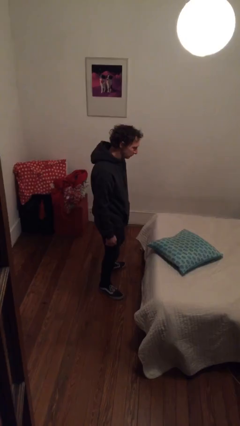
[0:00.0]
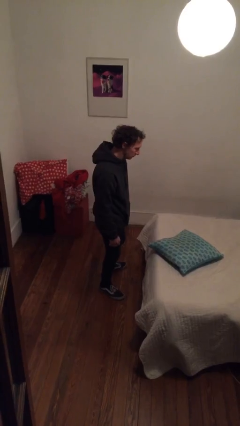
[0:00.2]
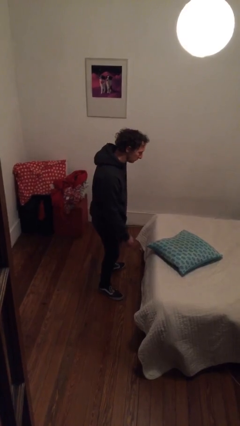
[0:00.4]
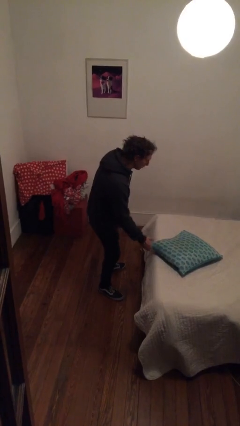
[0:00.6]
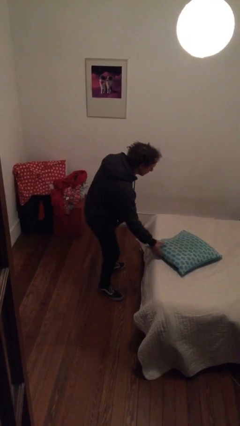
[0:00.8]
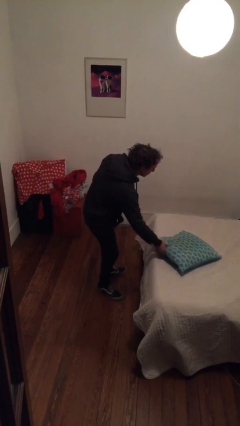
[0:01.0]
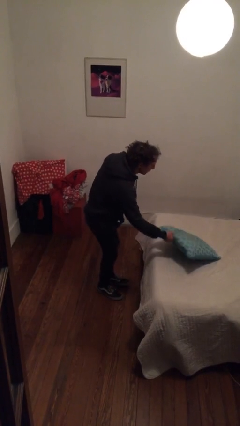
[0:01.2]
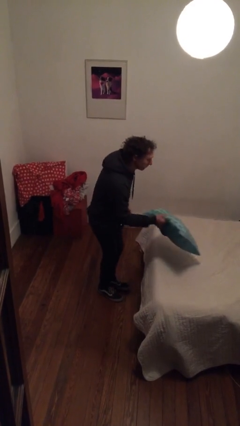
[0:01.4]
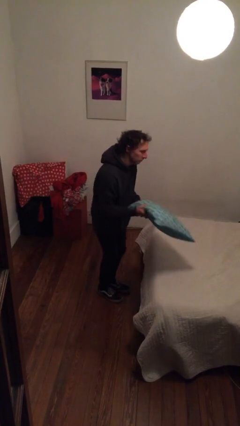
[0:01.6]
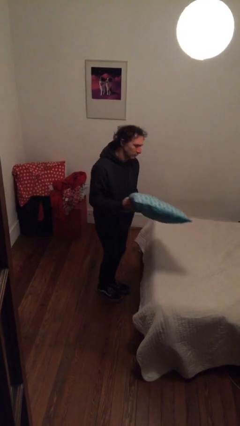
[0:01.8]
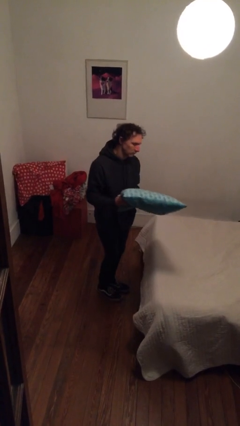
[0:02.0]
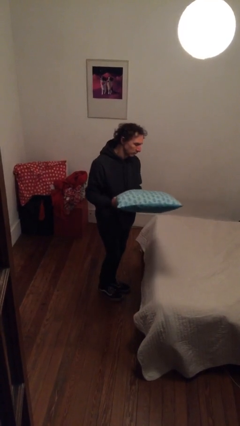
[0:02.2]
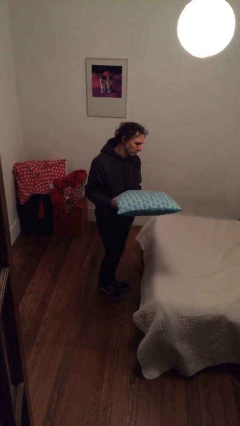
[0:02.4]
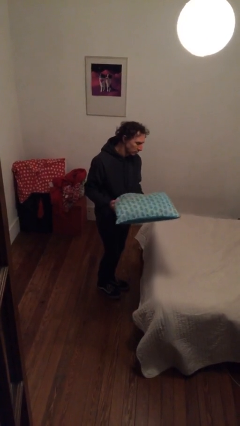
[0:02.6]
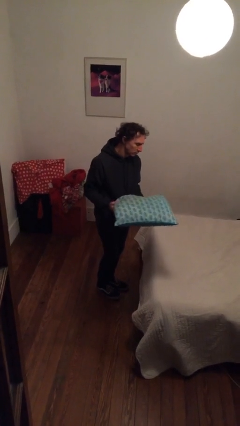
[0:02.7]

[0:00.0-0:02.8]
person picks up object from bed

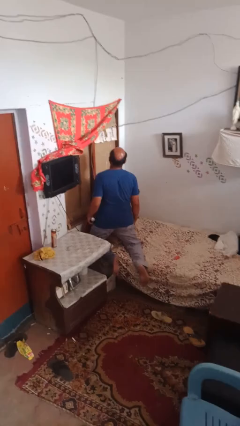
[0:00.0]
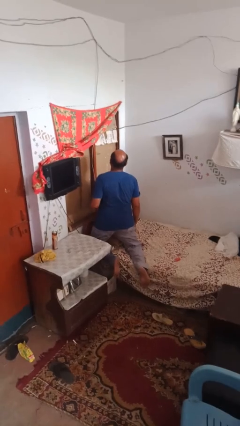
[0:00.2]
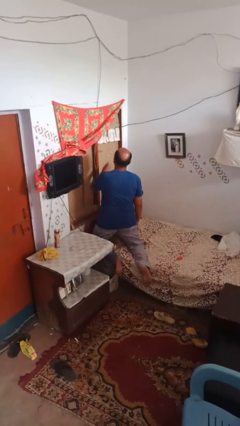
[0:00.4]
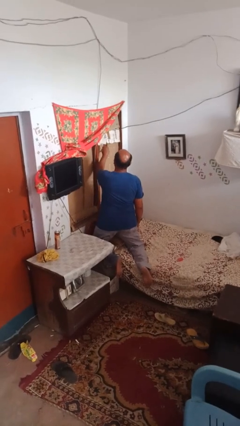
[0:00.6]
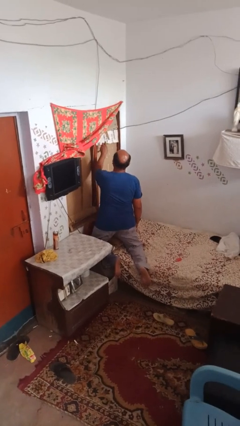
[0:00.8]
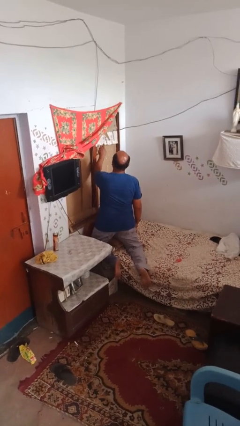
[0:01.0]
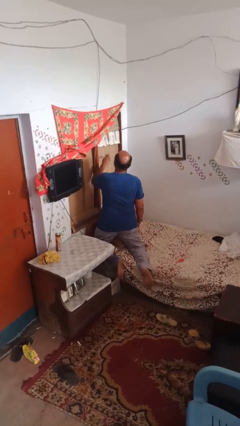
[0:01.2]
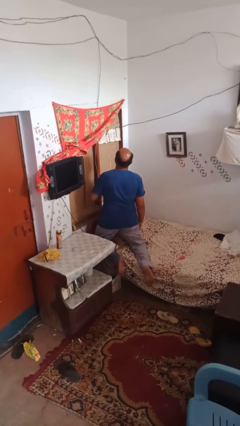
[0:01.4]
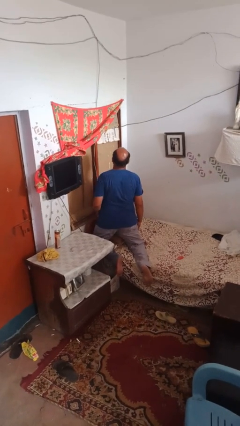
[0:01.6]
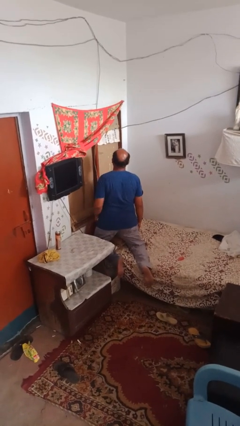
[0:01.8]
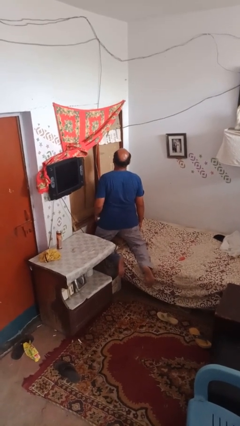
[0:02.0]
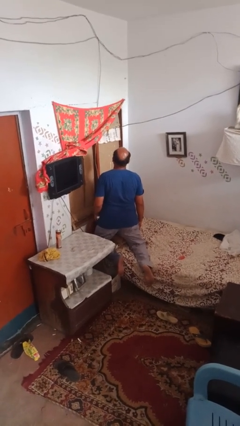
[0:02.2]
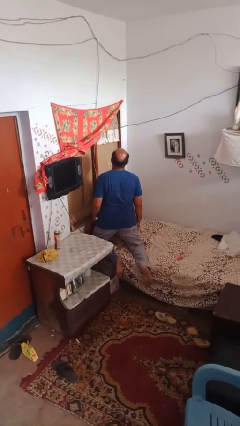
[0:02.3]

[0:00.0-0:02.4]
person sprays from bottle

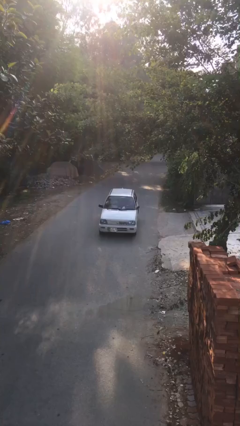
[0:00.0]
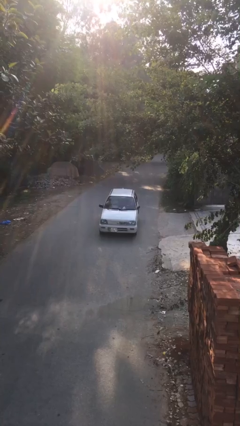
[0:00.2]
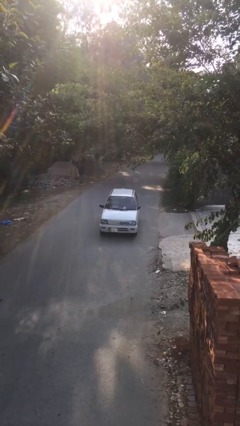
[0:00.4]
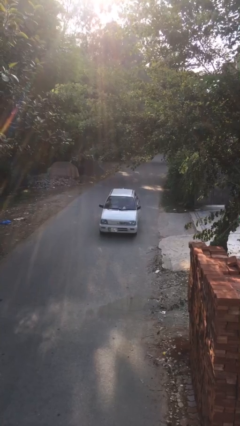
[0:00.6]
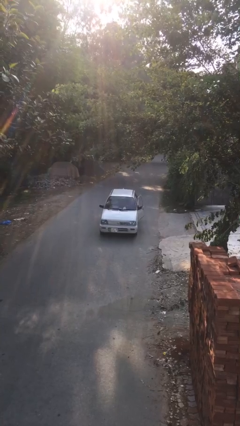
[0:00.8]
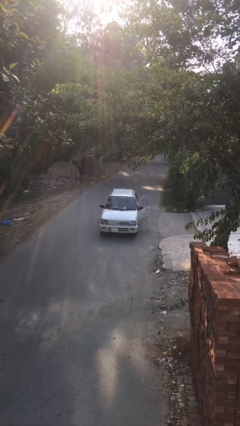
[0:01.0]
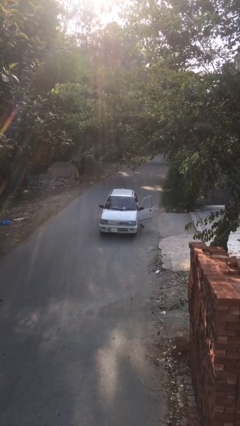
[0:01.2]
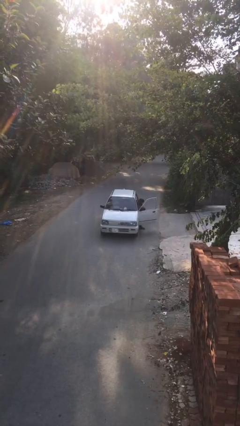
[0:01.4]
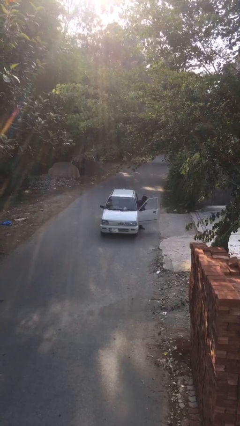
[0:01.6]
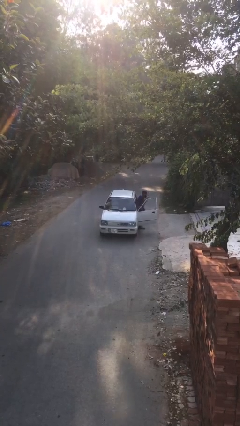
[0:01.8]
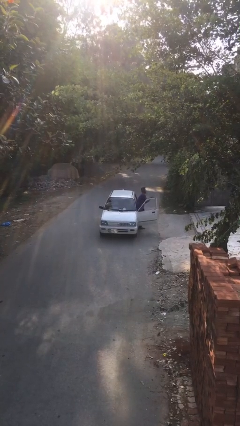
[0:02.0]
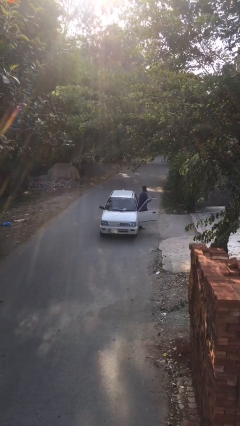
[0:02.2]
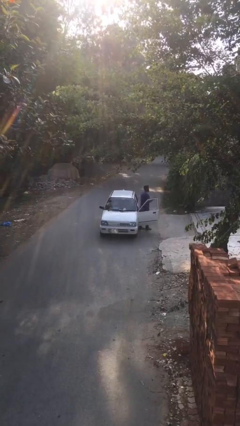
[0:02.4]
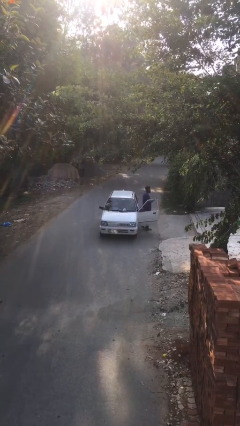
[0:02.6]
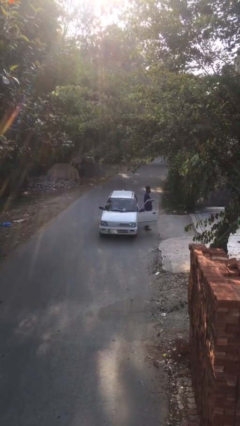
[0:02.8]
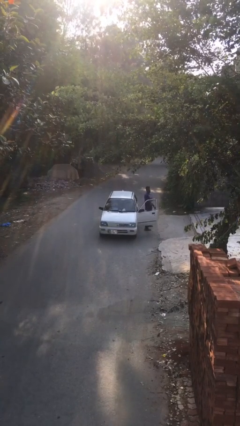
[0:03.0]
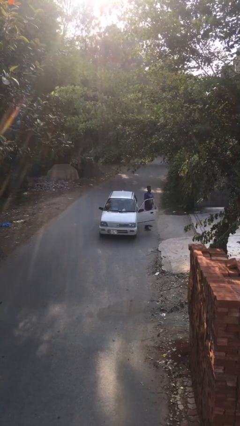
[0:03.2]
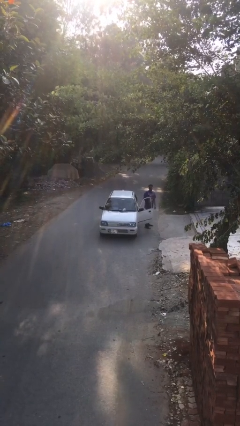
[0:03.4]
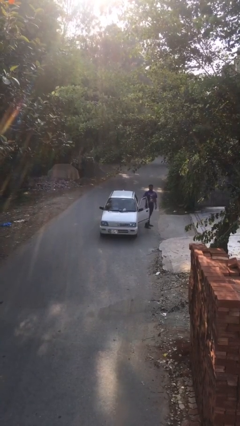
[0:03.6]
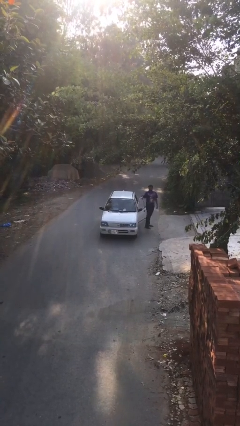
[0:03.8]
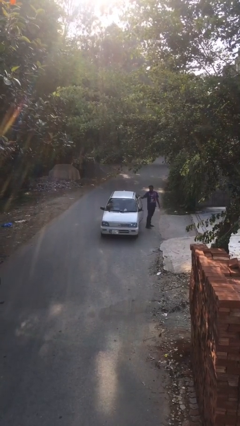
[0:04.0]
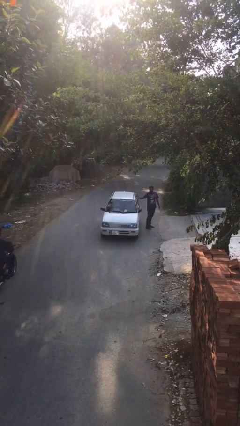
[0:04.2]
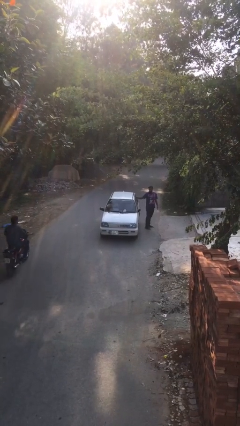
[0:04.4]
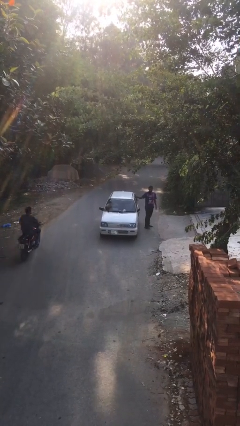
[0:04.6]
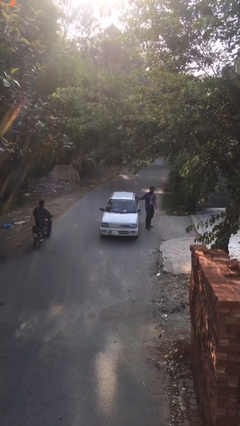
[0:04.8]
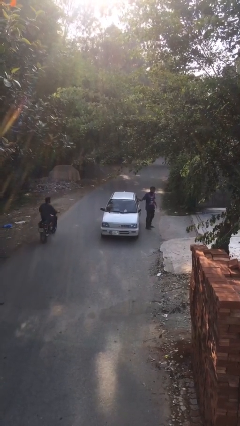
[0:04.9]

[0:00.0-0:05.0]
car drops off person

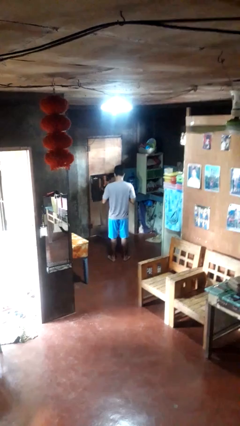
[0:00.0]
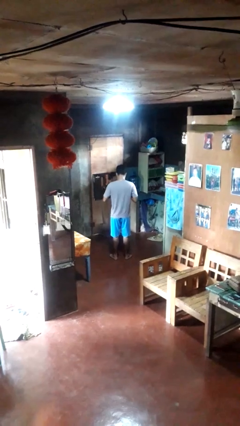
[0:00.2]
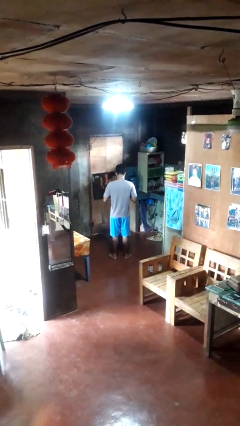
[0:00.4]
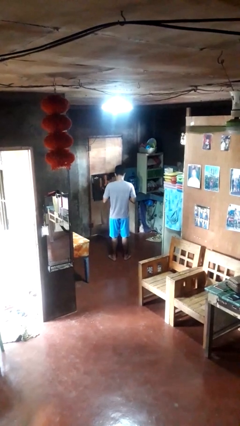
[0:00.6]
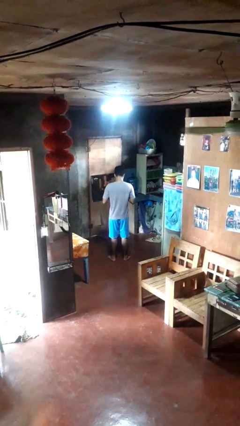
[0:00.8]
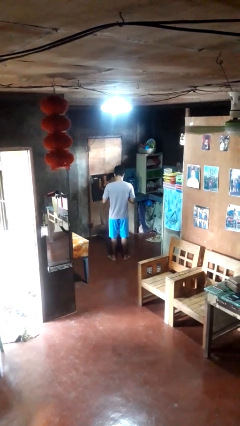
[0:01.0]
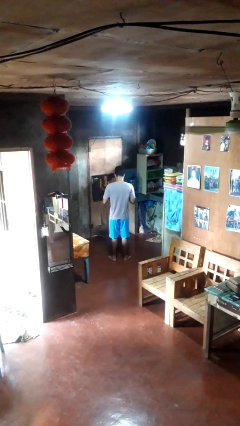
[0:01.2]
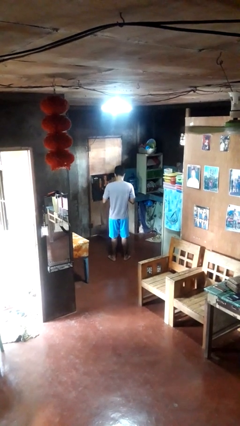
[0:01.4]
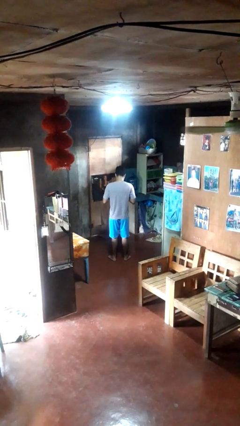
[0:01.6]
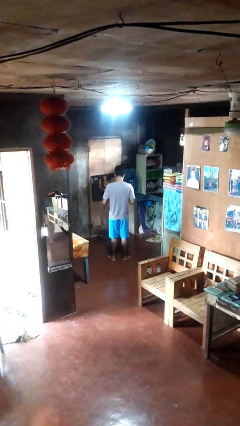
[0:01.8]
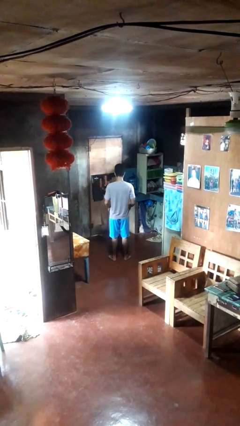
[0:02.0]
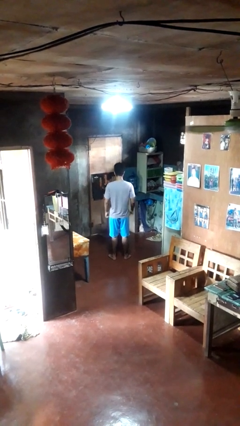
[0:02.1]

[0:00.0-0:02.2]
person unbuttons shirt

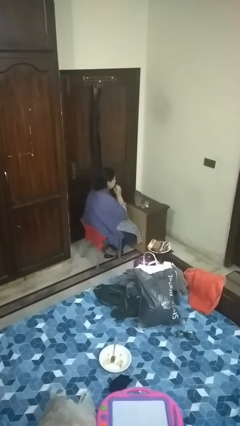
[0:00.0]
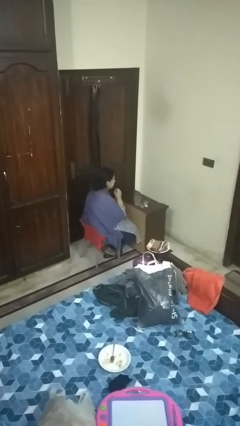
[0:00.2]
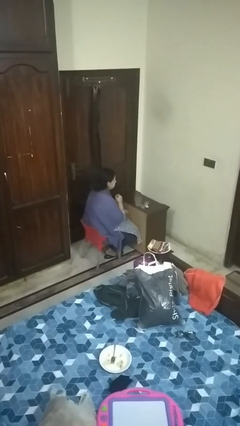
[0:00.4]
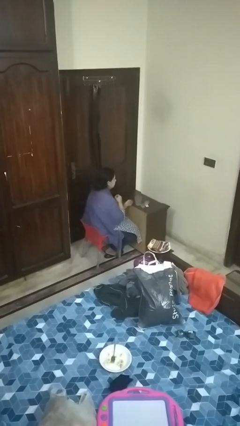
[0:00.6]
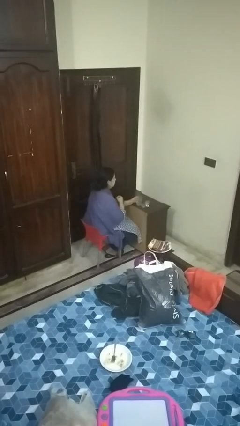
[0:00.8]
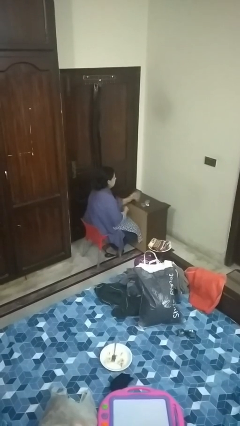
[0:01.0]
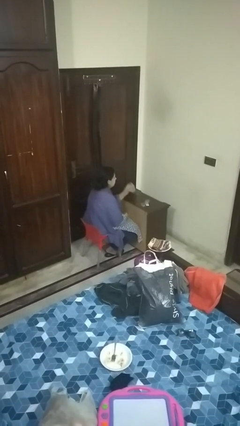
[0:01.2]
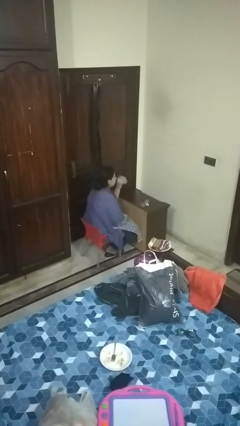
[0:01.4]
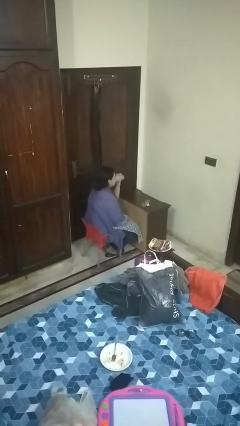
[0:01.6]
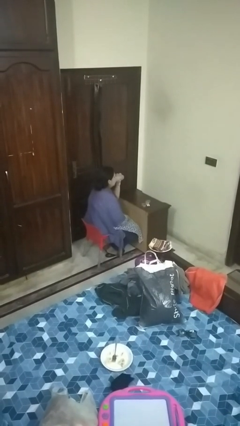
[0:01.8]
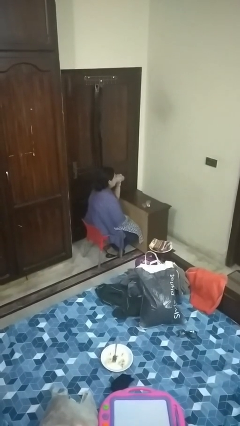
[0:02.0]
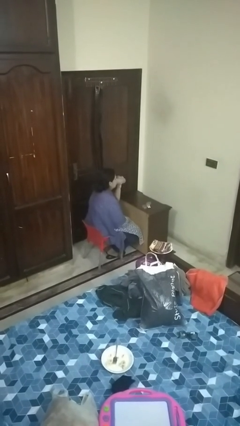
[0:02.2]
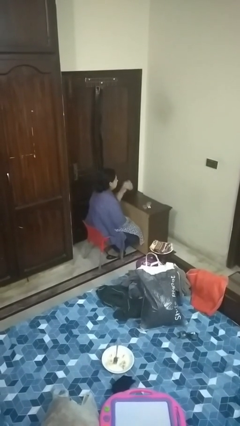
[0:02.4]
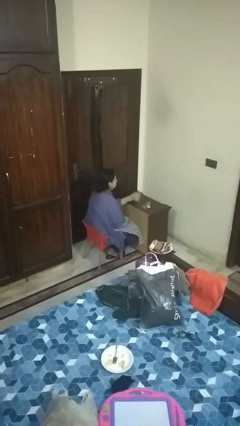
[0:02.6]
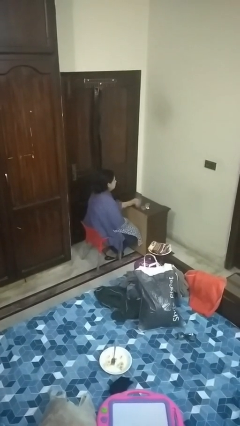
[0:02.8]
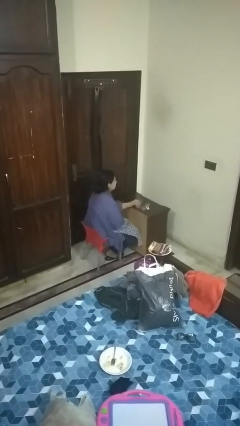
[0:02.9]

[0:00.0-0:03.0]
person drinks from cup

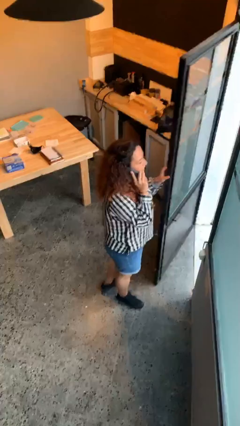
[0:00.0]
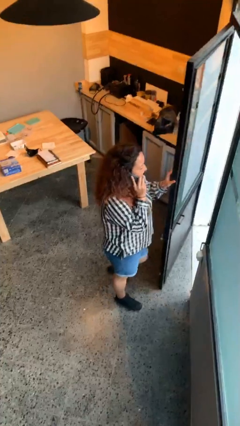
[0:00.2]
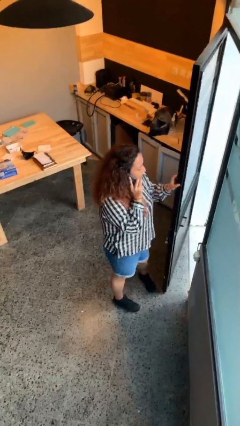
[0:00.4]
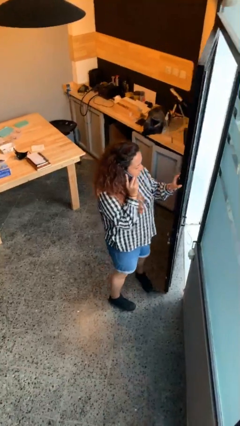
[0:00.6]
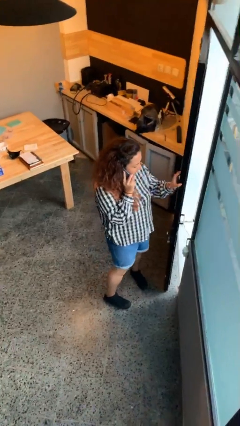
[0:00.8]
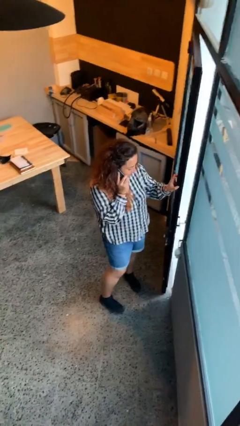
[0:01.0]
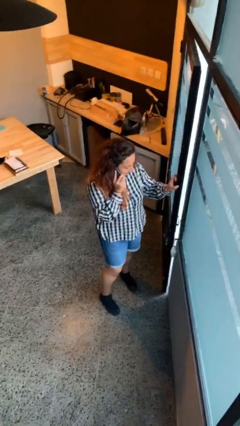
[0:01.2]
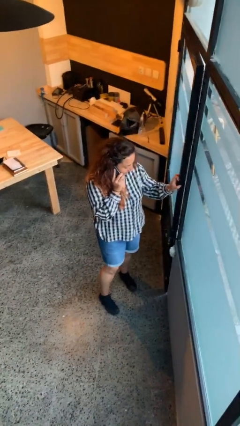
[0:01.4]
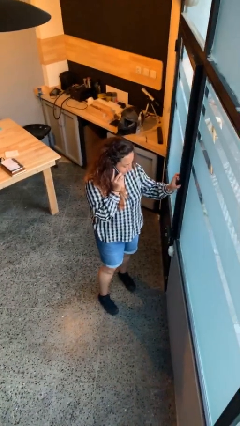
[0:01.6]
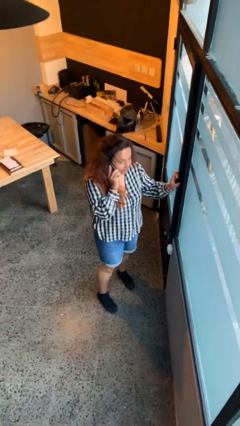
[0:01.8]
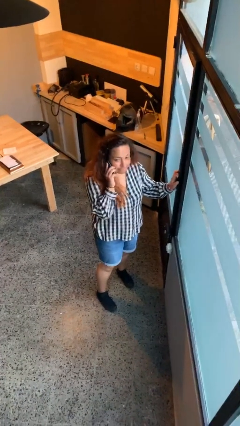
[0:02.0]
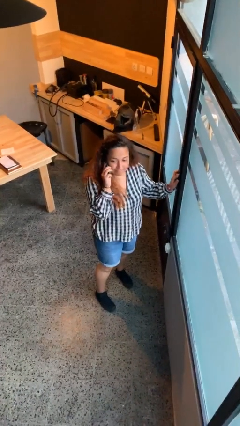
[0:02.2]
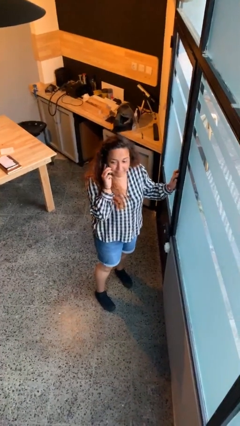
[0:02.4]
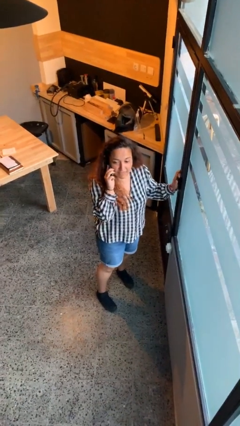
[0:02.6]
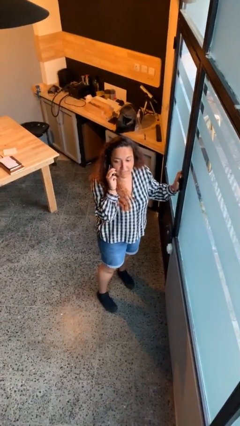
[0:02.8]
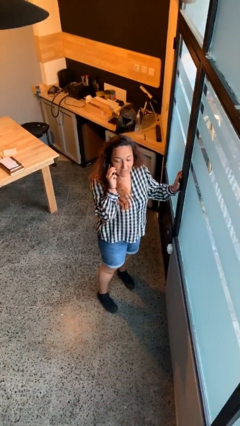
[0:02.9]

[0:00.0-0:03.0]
person closes facility door
